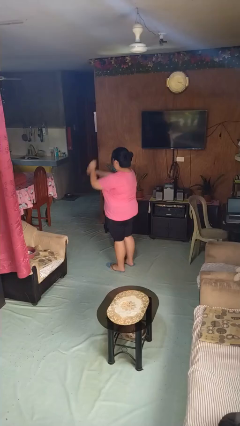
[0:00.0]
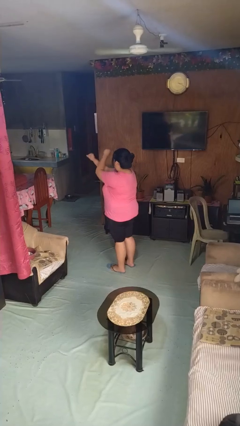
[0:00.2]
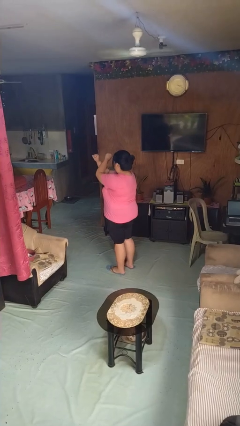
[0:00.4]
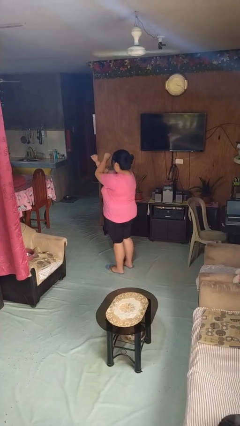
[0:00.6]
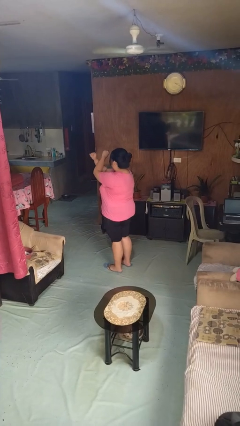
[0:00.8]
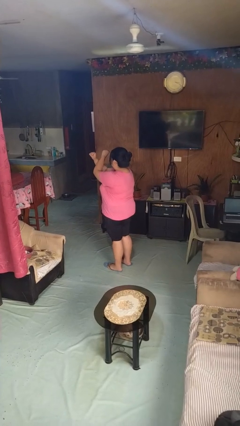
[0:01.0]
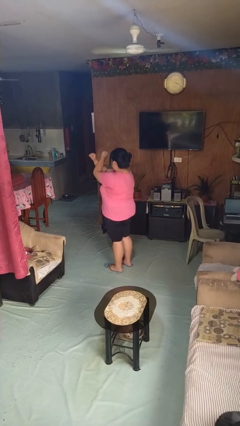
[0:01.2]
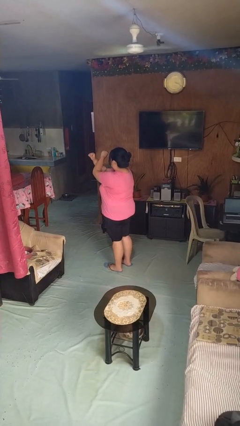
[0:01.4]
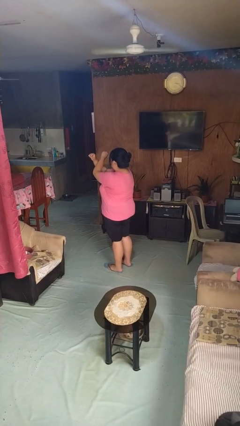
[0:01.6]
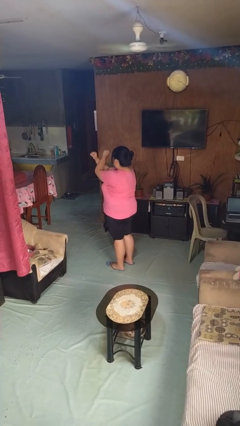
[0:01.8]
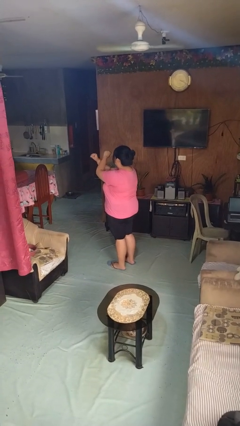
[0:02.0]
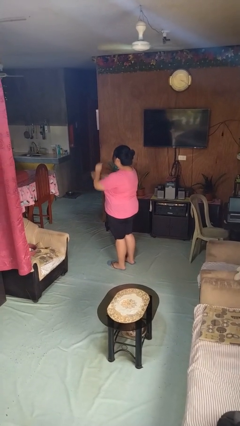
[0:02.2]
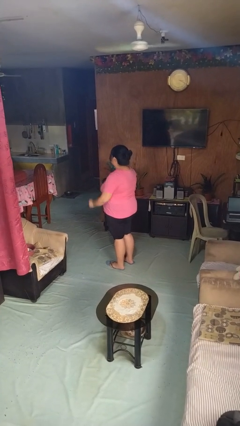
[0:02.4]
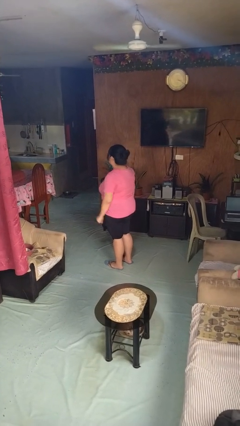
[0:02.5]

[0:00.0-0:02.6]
person gestures arms x

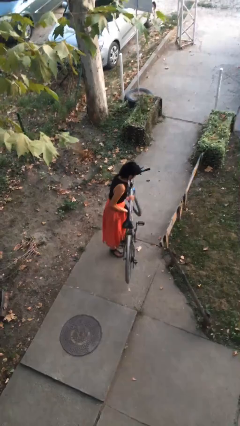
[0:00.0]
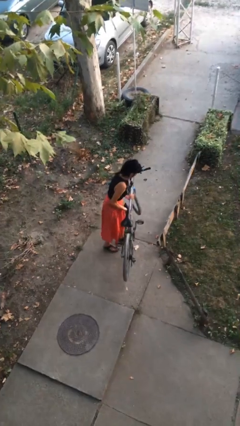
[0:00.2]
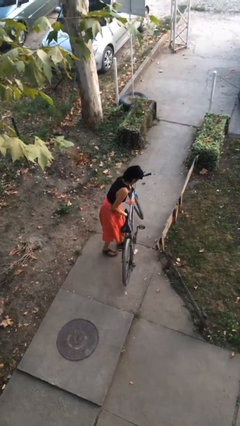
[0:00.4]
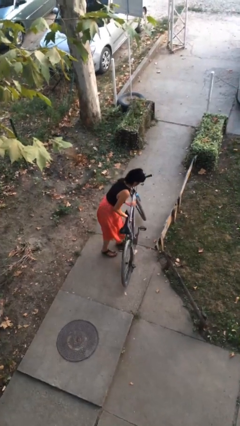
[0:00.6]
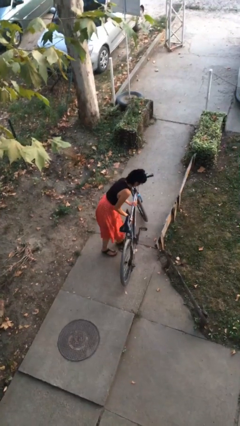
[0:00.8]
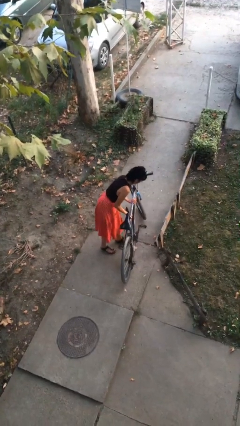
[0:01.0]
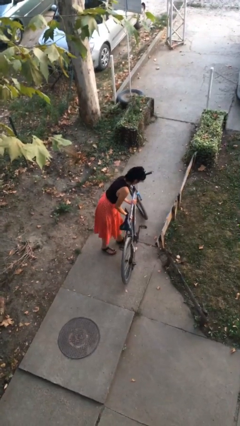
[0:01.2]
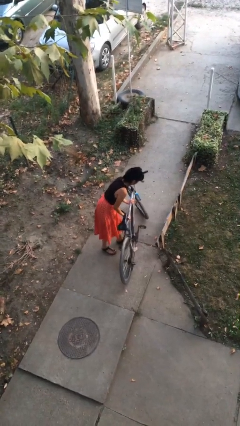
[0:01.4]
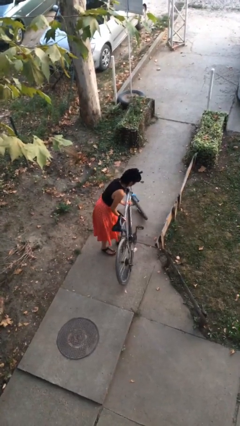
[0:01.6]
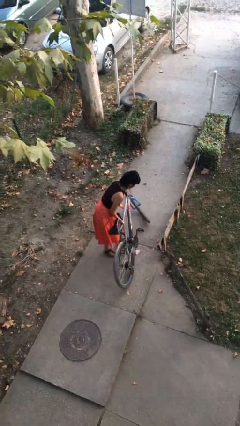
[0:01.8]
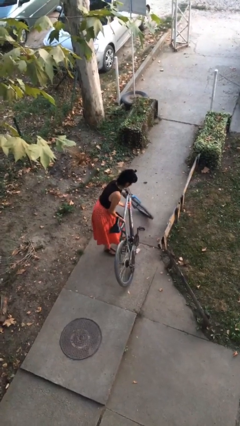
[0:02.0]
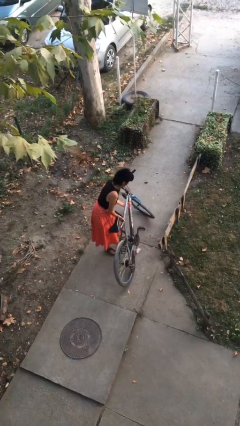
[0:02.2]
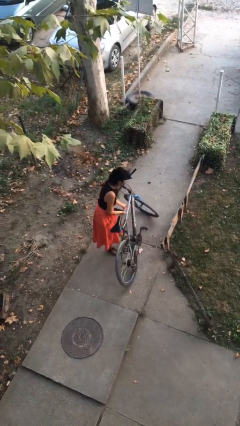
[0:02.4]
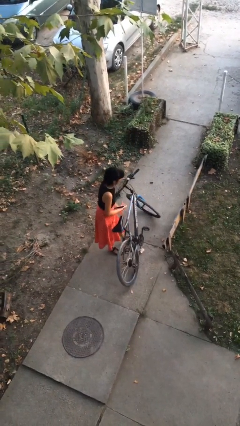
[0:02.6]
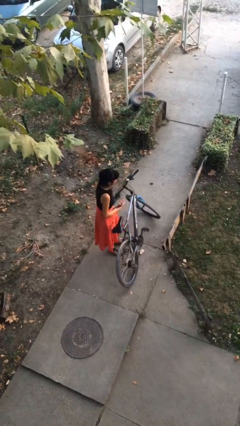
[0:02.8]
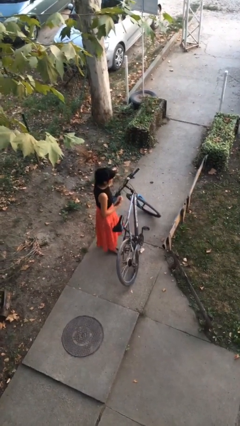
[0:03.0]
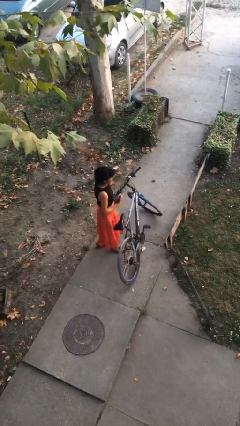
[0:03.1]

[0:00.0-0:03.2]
person puts down object on floor

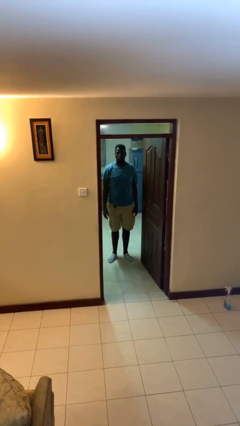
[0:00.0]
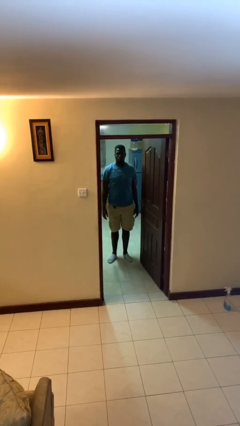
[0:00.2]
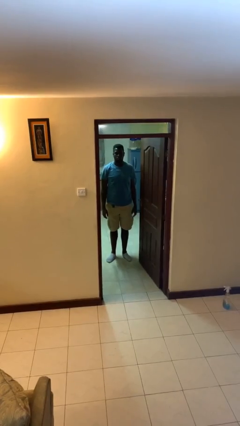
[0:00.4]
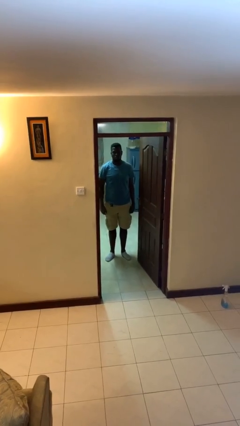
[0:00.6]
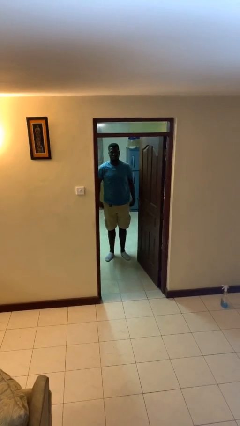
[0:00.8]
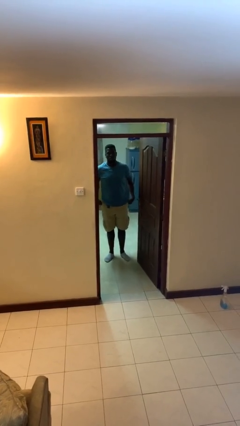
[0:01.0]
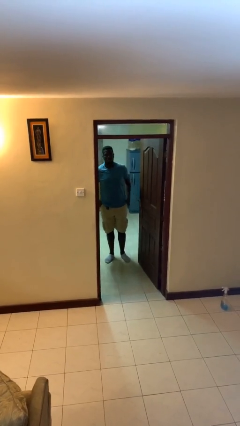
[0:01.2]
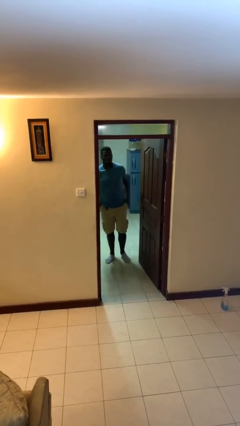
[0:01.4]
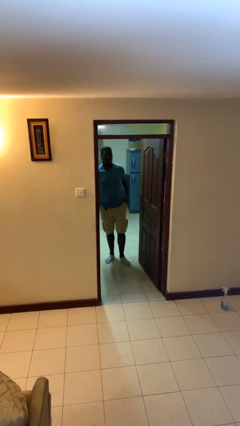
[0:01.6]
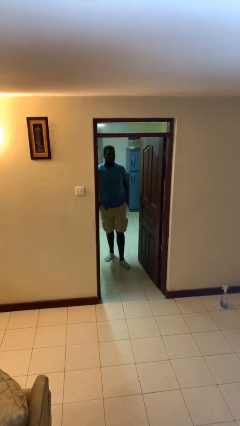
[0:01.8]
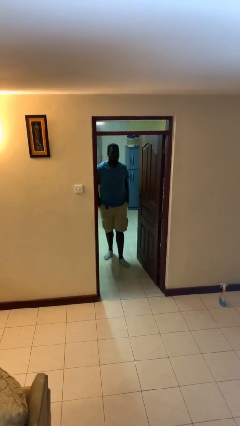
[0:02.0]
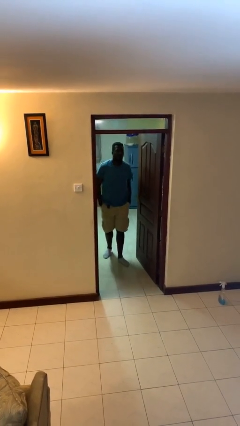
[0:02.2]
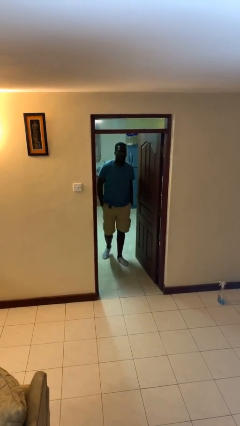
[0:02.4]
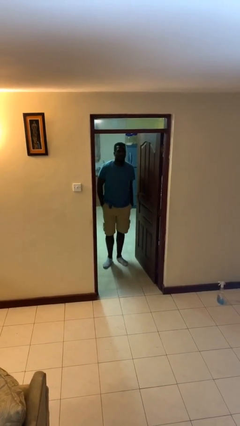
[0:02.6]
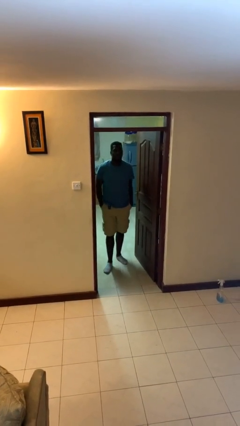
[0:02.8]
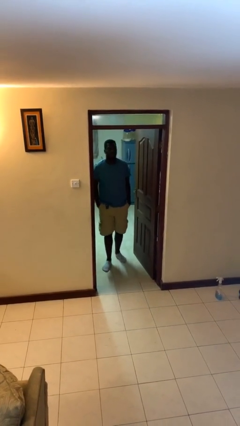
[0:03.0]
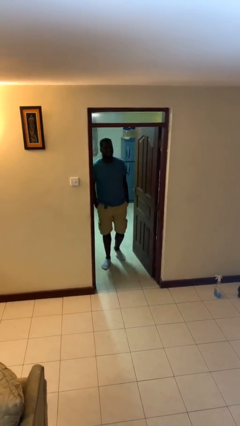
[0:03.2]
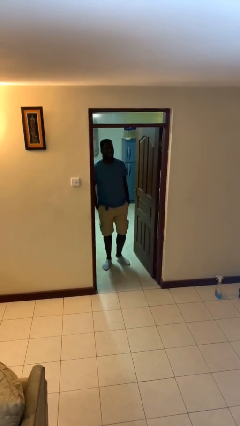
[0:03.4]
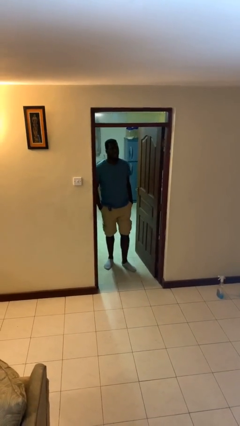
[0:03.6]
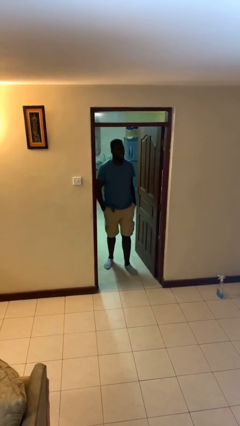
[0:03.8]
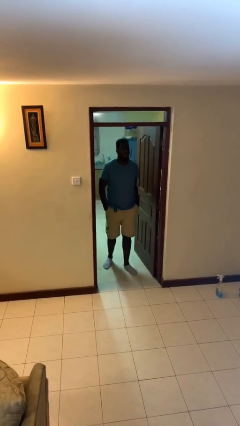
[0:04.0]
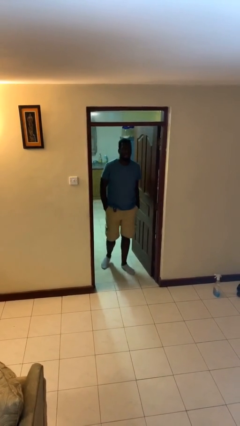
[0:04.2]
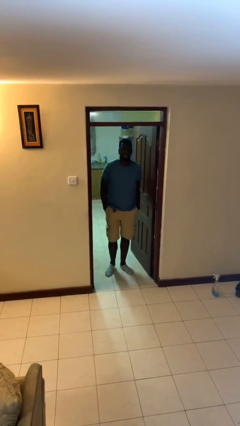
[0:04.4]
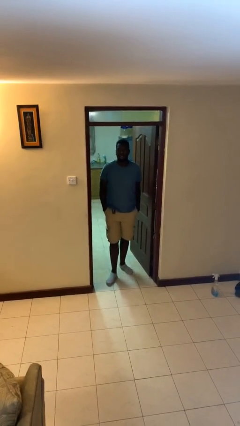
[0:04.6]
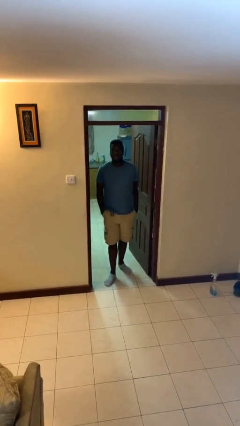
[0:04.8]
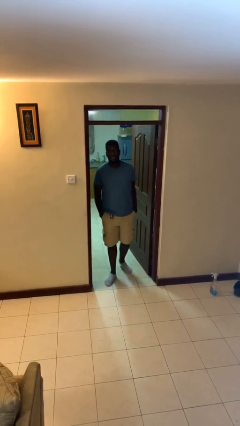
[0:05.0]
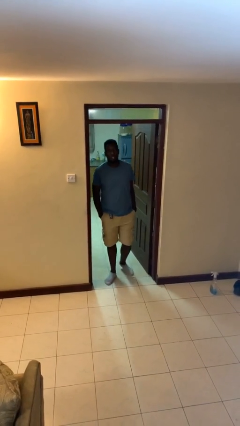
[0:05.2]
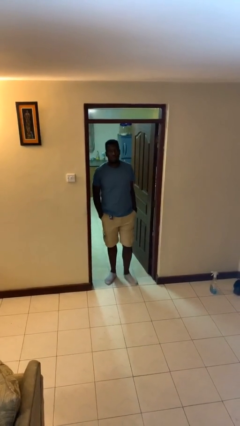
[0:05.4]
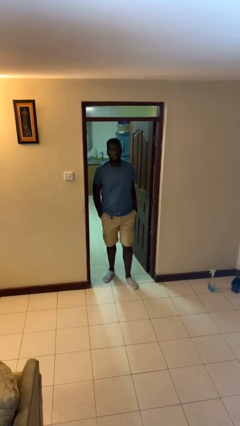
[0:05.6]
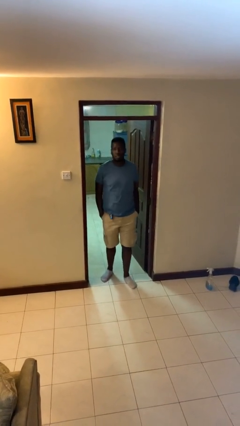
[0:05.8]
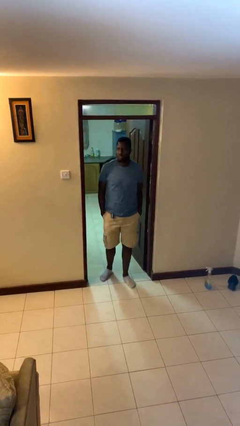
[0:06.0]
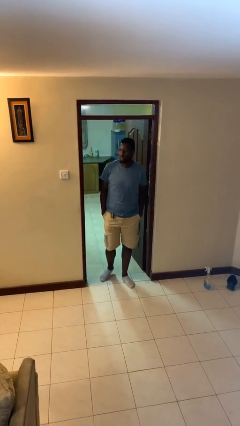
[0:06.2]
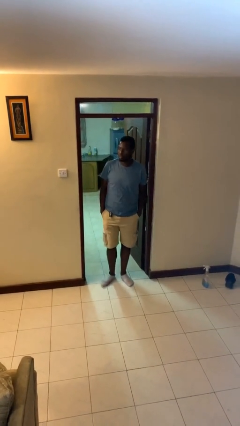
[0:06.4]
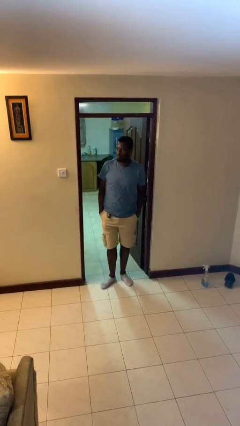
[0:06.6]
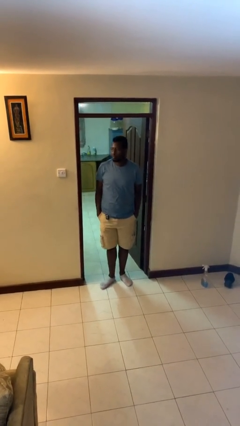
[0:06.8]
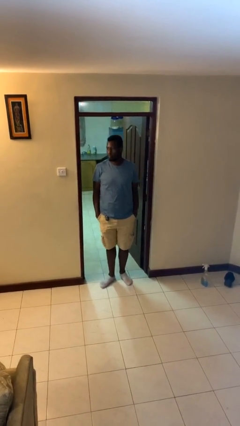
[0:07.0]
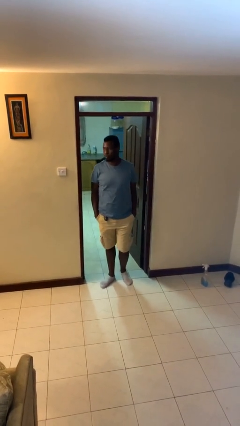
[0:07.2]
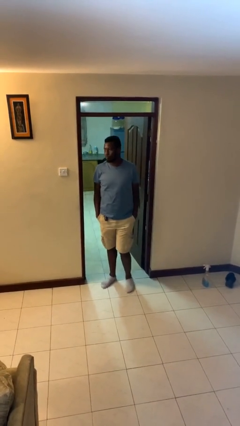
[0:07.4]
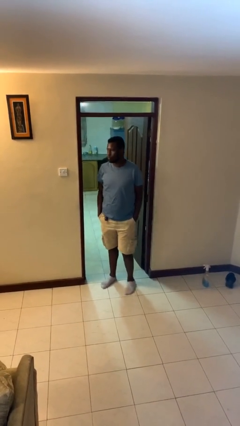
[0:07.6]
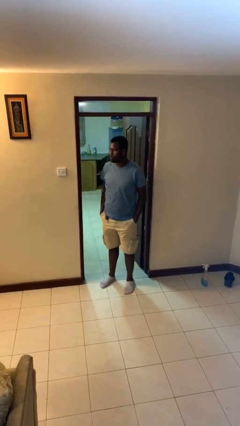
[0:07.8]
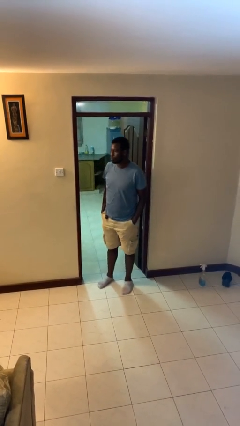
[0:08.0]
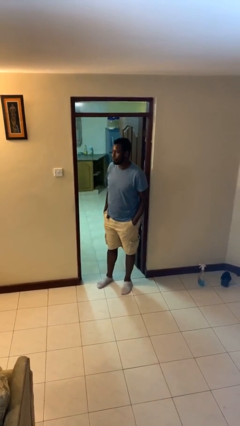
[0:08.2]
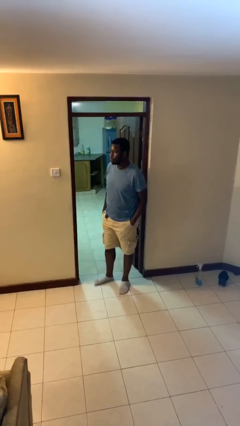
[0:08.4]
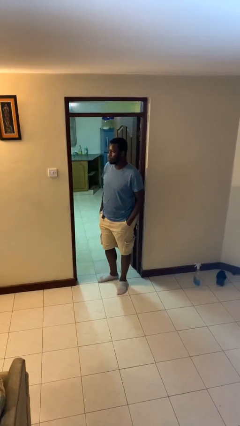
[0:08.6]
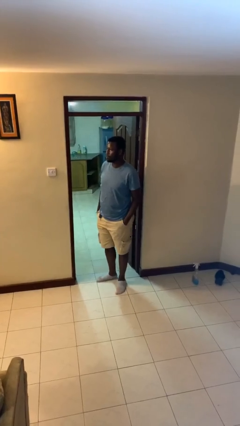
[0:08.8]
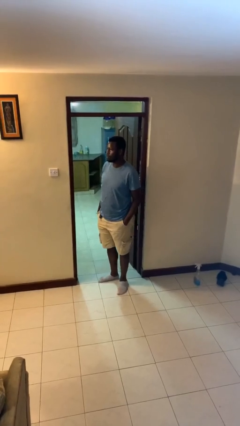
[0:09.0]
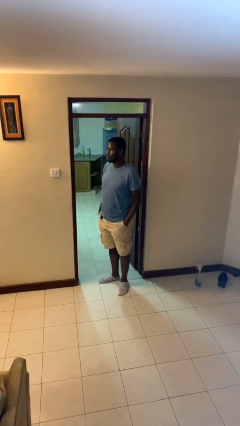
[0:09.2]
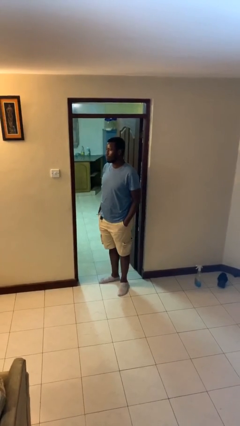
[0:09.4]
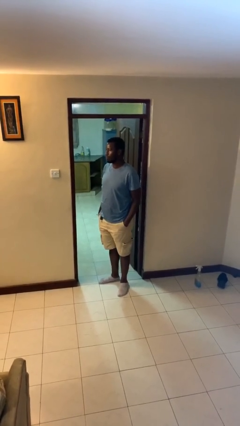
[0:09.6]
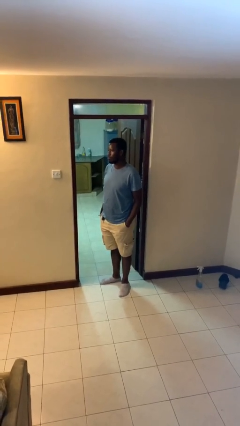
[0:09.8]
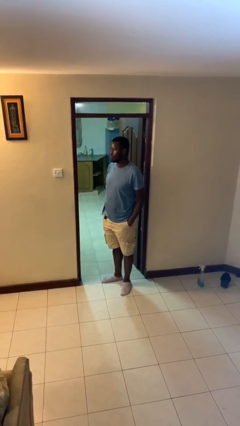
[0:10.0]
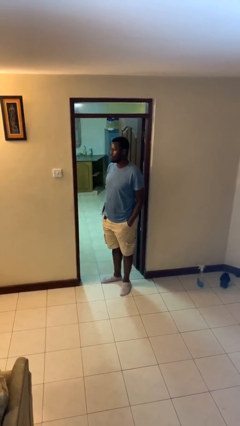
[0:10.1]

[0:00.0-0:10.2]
person enters scene through structure

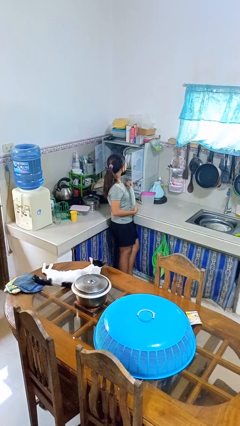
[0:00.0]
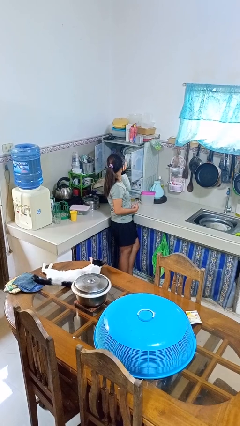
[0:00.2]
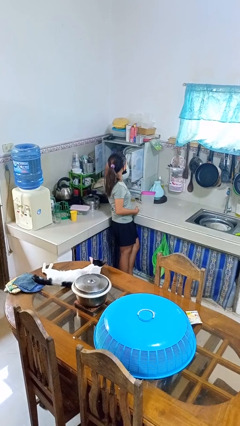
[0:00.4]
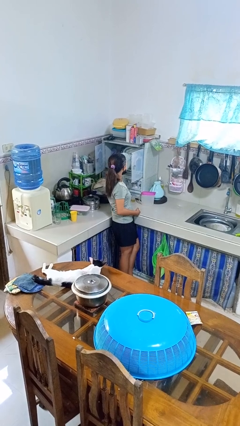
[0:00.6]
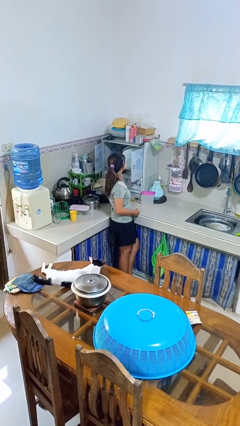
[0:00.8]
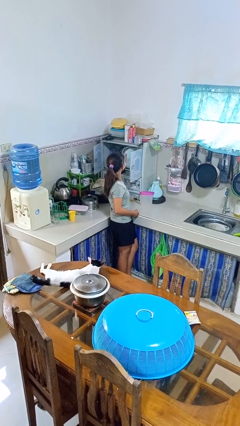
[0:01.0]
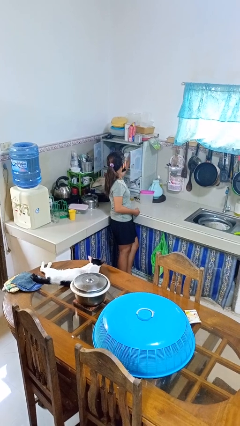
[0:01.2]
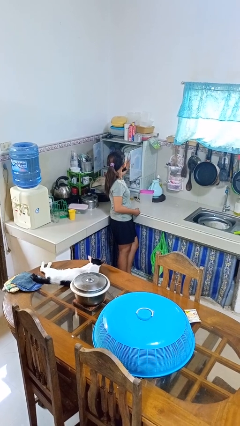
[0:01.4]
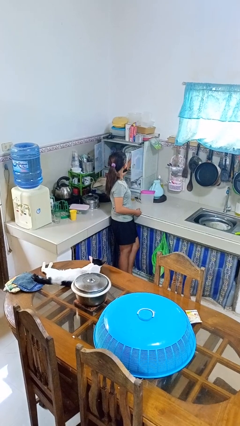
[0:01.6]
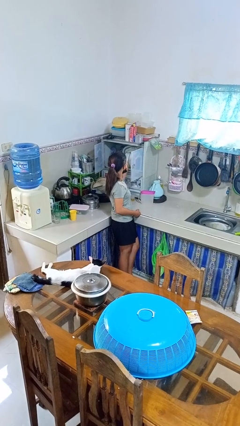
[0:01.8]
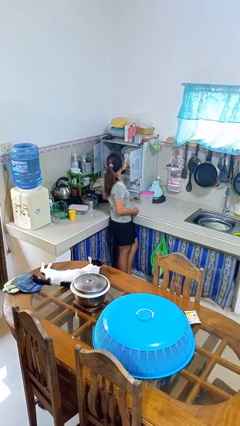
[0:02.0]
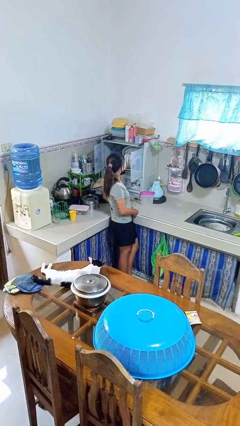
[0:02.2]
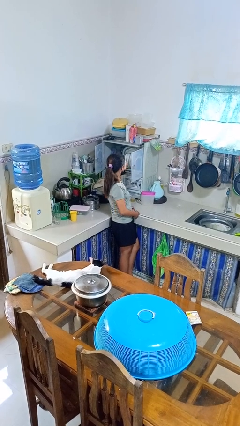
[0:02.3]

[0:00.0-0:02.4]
person puts object into kitchen drawer
